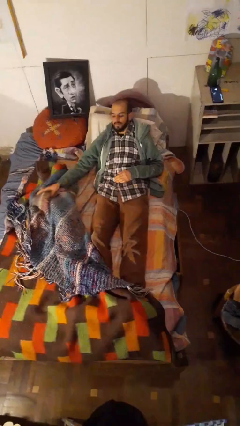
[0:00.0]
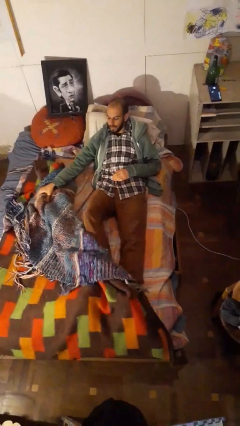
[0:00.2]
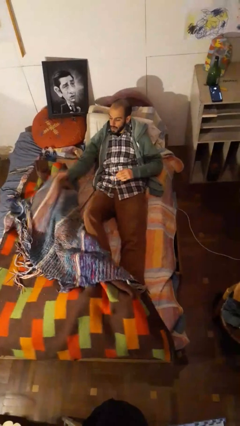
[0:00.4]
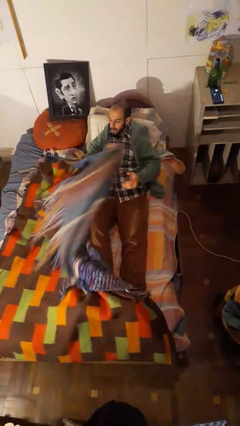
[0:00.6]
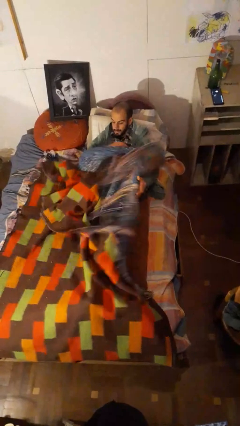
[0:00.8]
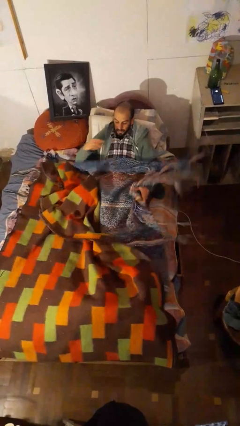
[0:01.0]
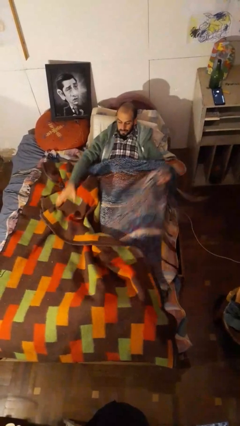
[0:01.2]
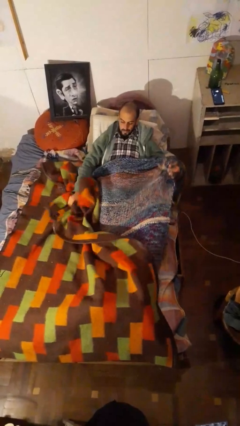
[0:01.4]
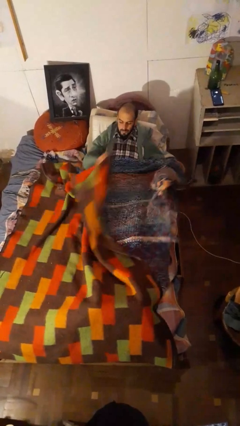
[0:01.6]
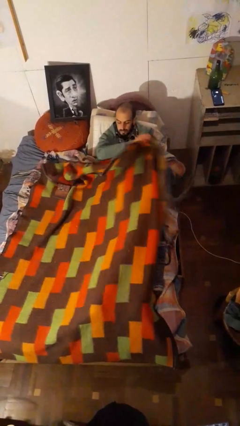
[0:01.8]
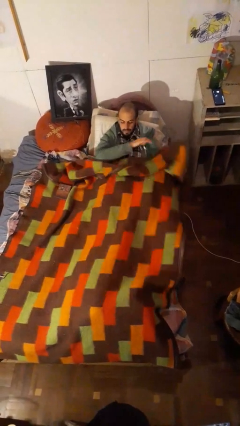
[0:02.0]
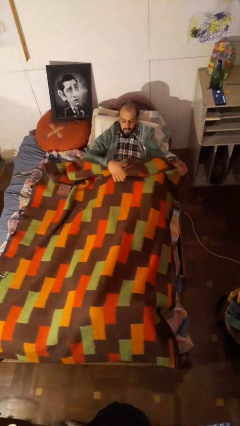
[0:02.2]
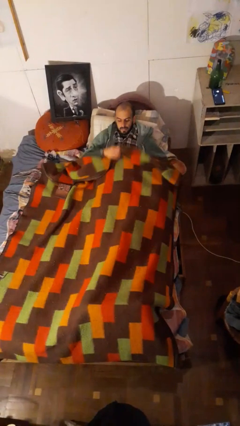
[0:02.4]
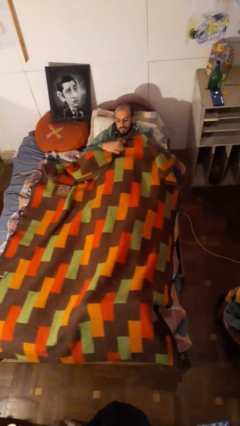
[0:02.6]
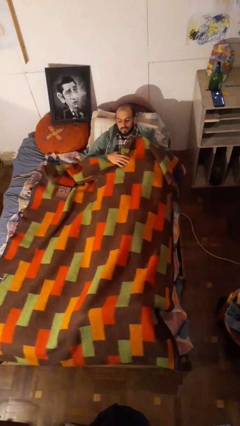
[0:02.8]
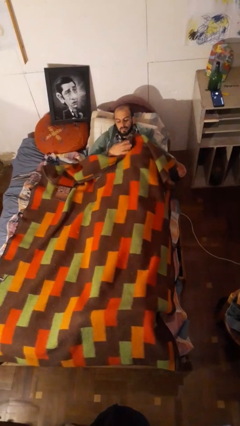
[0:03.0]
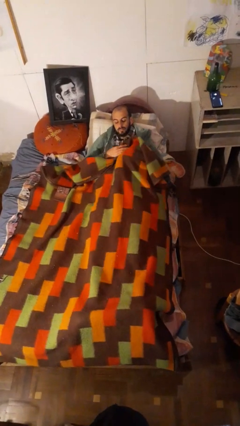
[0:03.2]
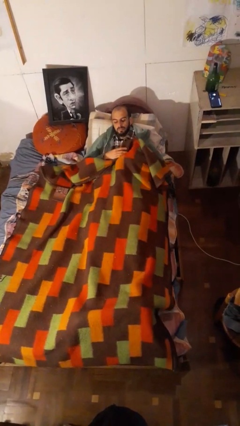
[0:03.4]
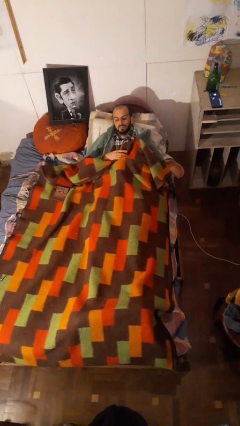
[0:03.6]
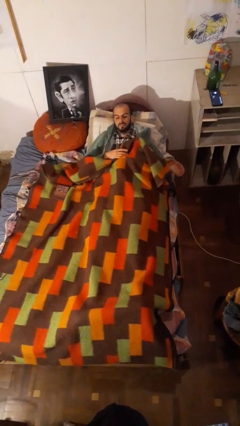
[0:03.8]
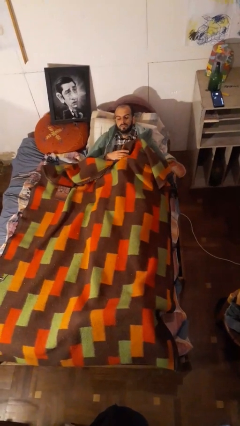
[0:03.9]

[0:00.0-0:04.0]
person covers with bedsheets

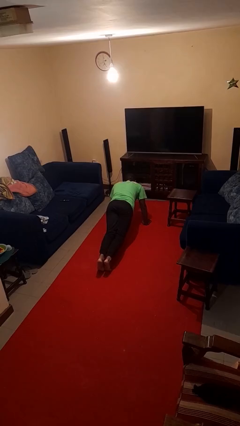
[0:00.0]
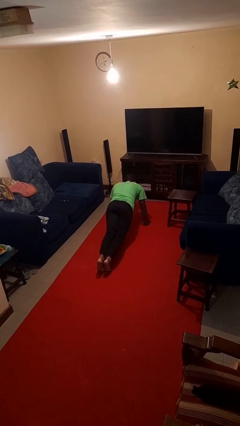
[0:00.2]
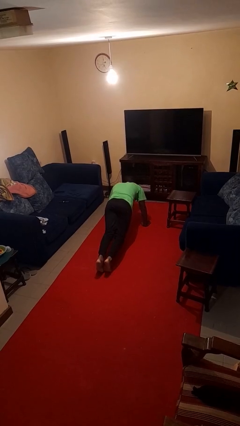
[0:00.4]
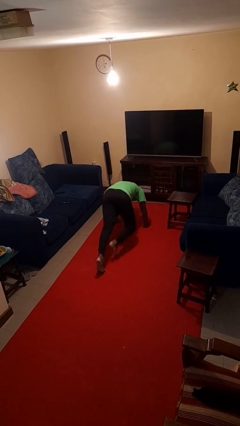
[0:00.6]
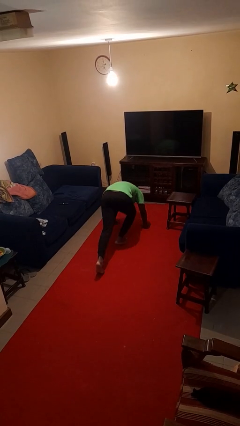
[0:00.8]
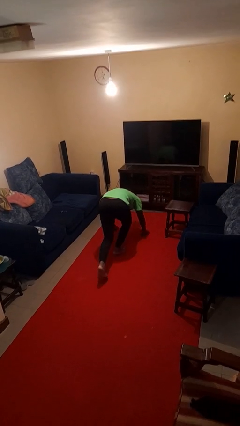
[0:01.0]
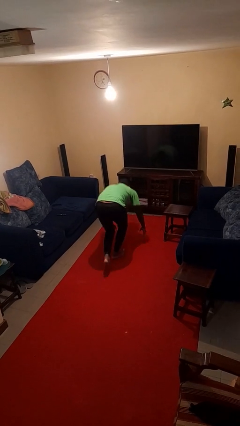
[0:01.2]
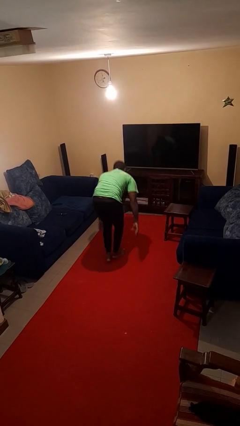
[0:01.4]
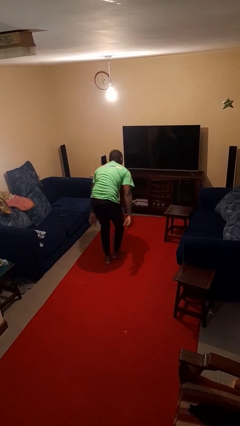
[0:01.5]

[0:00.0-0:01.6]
person stands up from floor

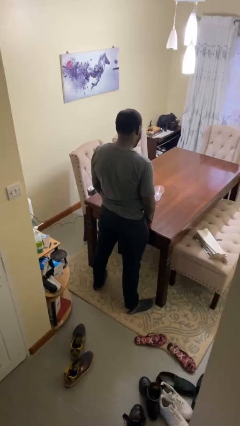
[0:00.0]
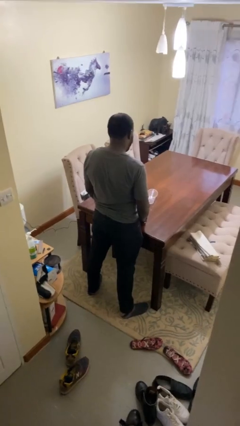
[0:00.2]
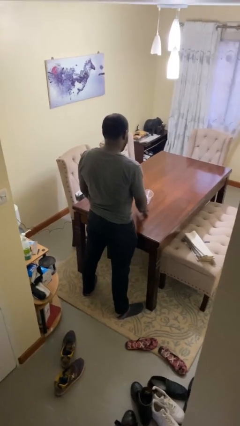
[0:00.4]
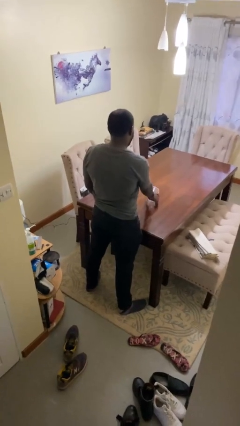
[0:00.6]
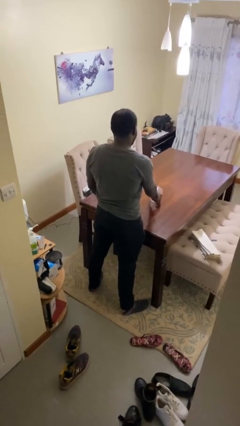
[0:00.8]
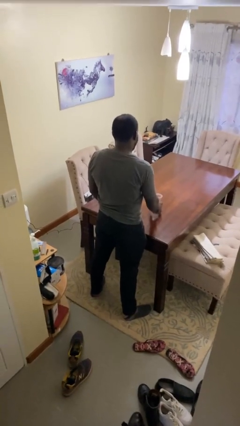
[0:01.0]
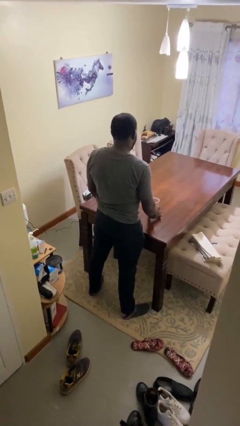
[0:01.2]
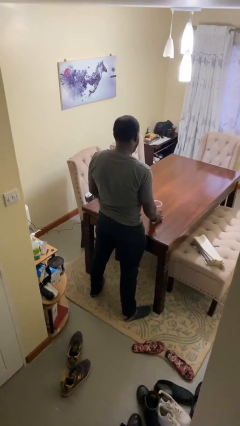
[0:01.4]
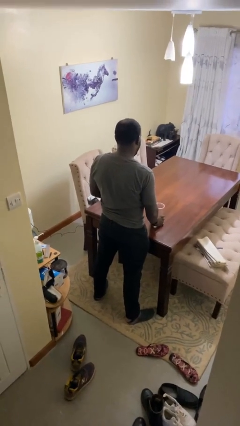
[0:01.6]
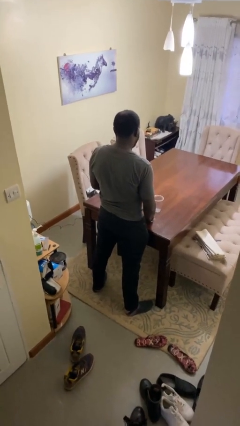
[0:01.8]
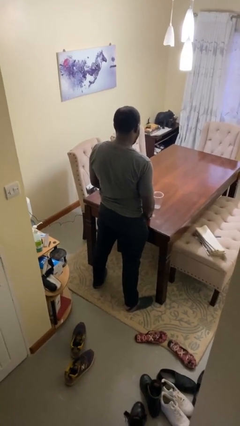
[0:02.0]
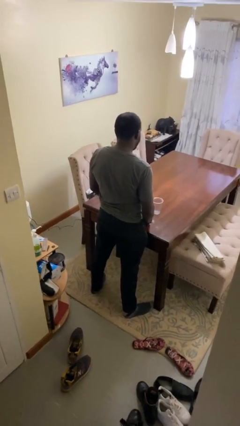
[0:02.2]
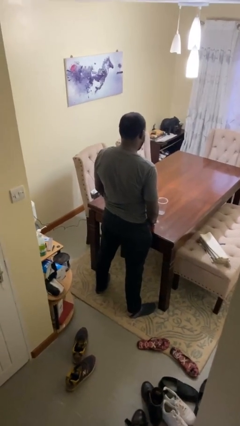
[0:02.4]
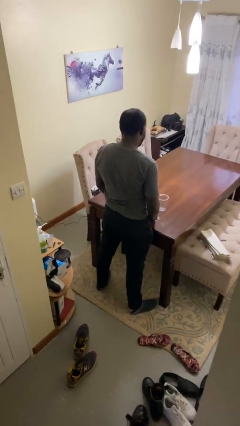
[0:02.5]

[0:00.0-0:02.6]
person sets upright glass

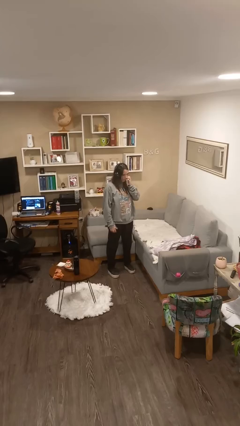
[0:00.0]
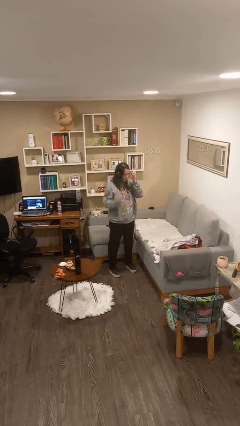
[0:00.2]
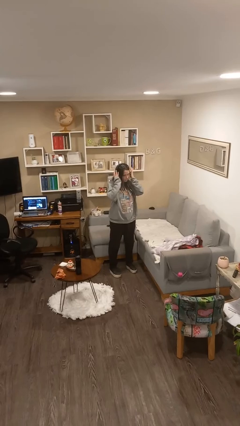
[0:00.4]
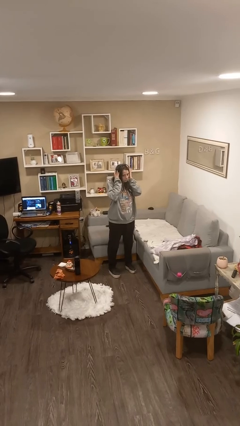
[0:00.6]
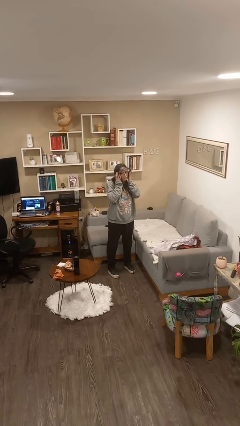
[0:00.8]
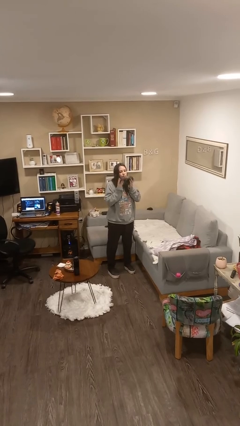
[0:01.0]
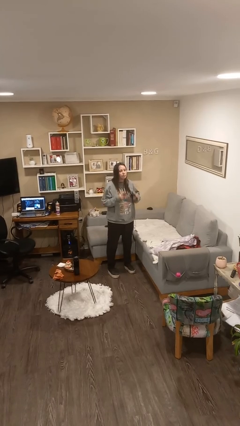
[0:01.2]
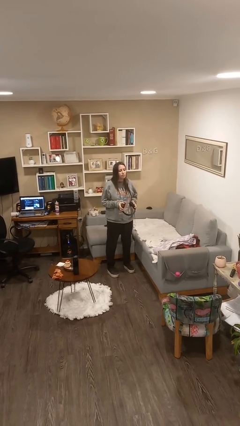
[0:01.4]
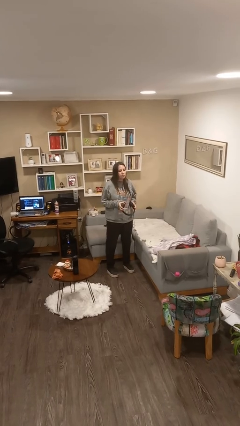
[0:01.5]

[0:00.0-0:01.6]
person takes off headphones

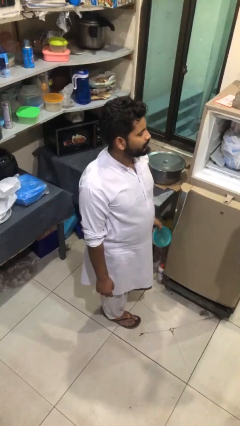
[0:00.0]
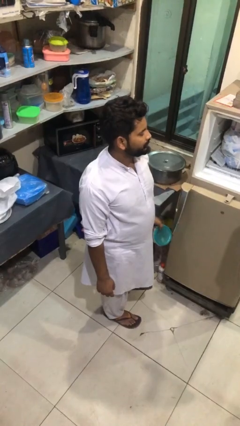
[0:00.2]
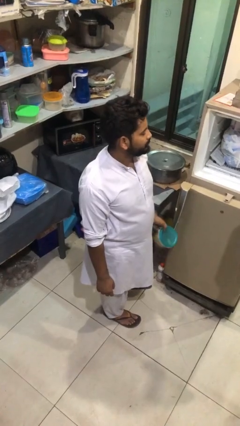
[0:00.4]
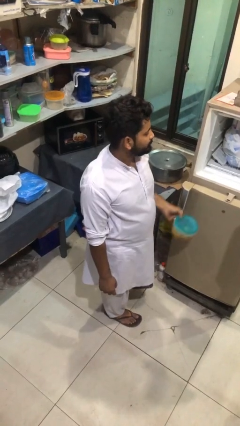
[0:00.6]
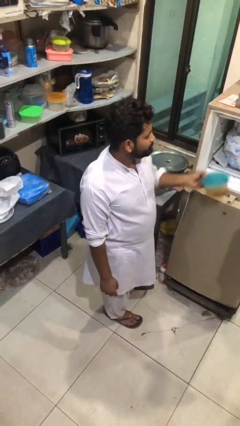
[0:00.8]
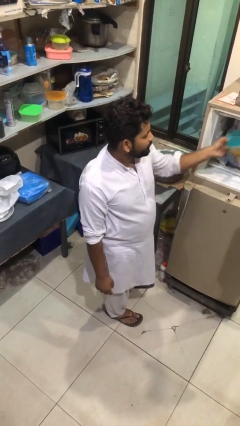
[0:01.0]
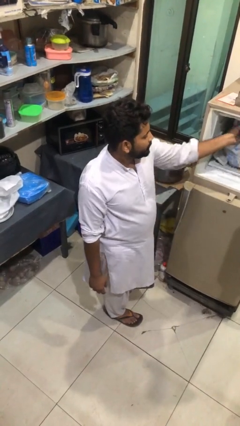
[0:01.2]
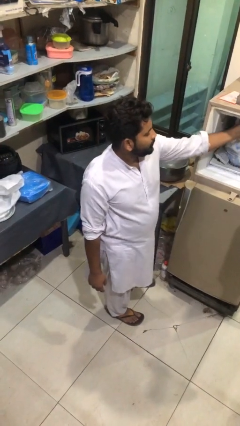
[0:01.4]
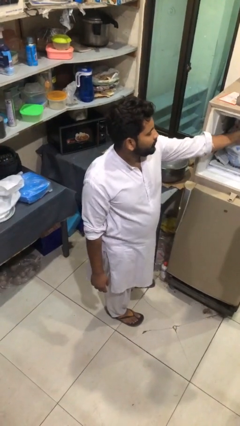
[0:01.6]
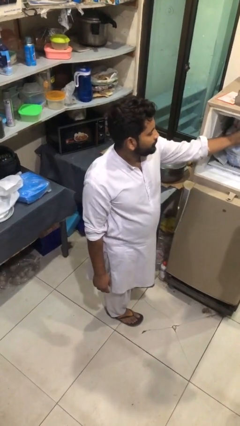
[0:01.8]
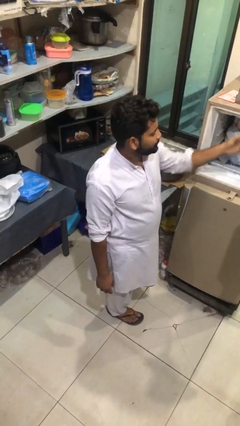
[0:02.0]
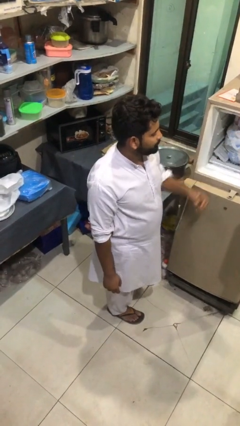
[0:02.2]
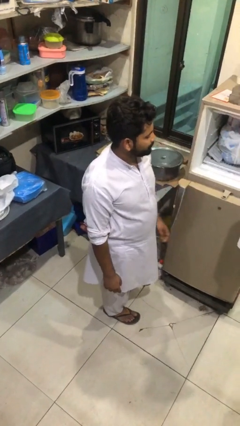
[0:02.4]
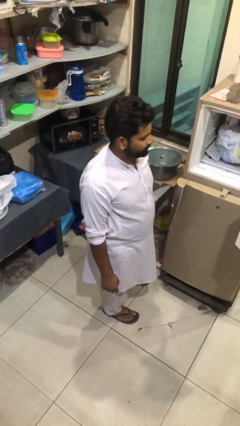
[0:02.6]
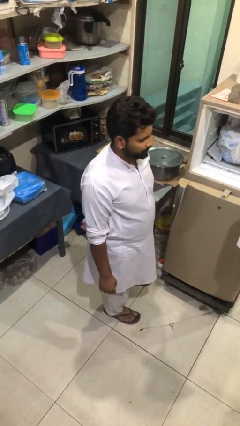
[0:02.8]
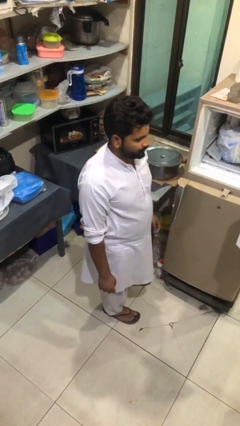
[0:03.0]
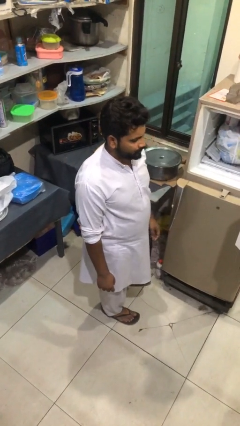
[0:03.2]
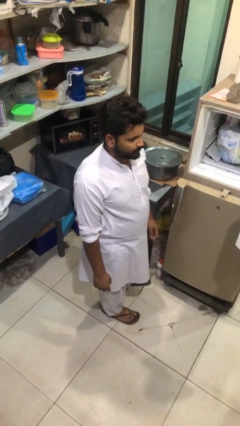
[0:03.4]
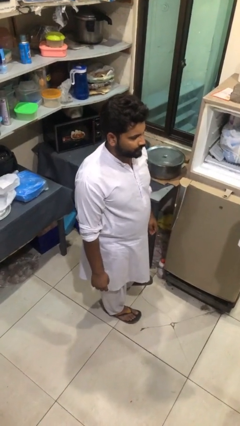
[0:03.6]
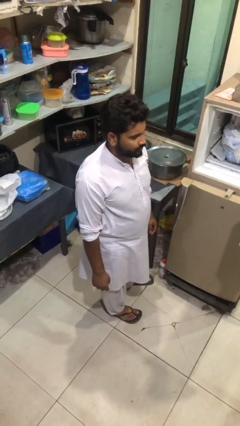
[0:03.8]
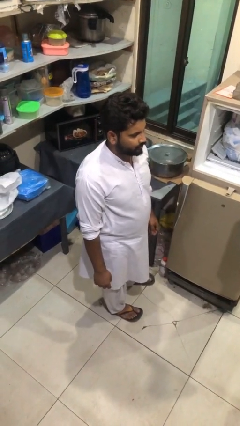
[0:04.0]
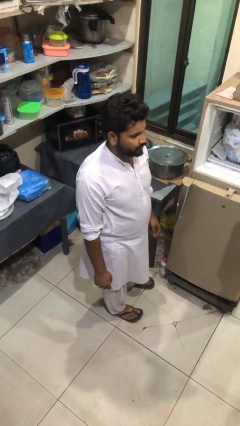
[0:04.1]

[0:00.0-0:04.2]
person puts object into refrigerator

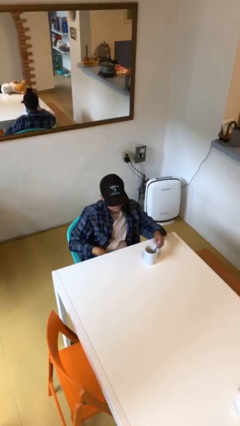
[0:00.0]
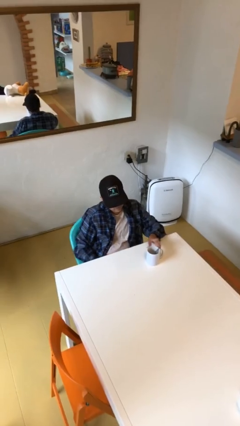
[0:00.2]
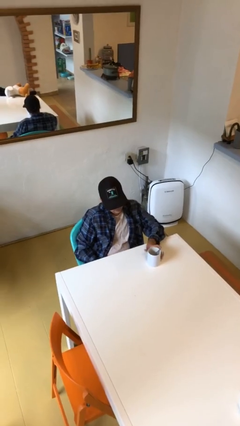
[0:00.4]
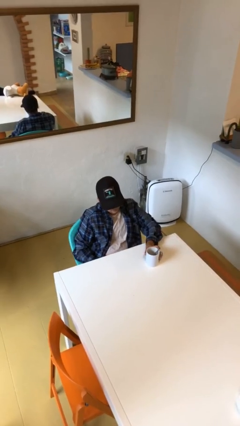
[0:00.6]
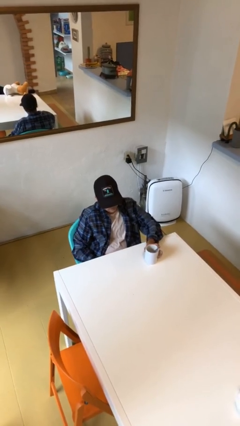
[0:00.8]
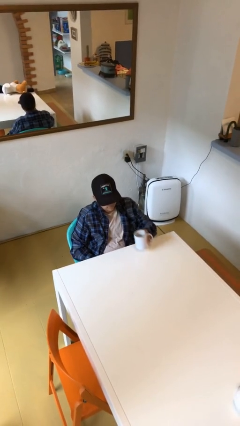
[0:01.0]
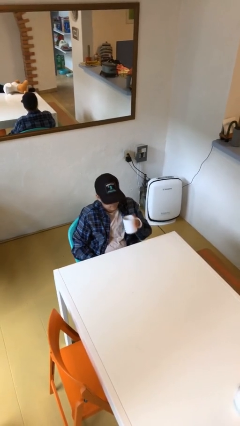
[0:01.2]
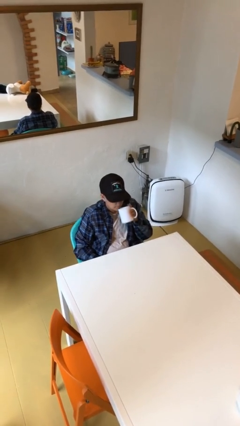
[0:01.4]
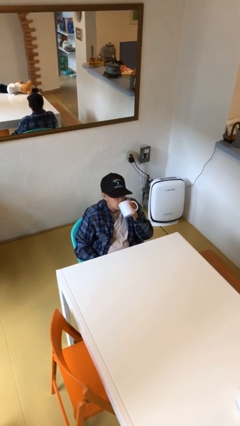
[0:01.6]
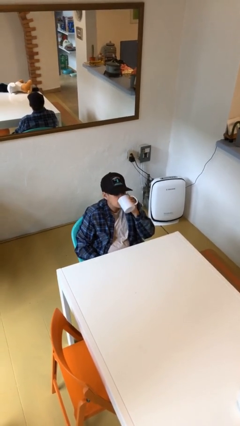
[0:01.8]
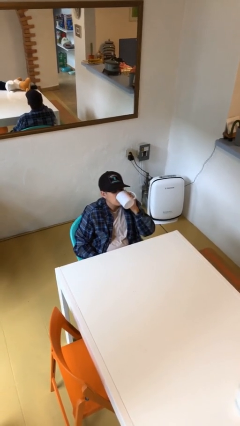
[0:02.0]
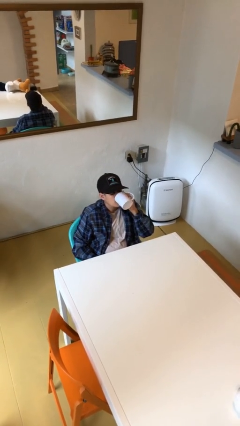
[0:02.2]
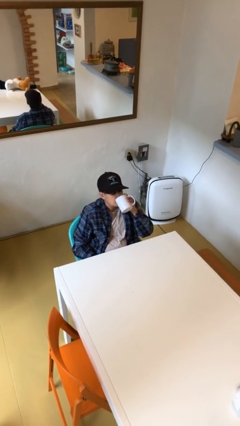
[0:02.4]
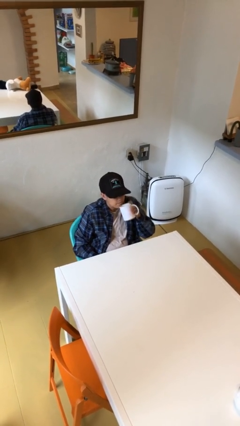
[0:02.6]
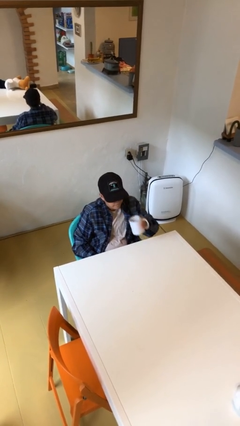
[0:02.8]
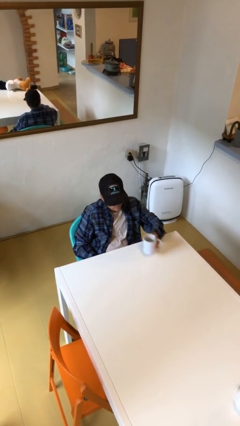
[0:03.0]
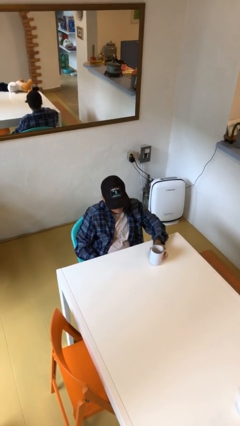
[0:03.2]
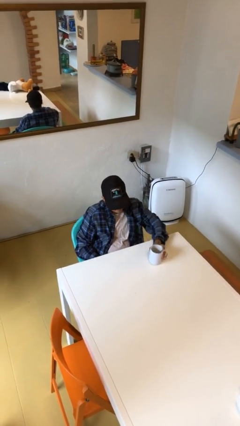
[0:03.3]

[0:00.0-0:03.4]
person drinks from mug
